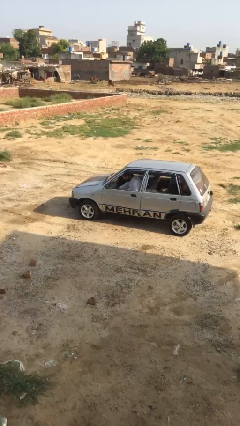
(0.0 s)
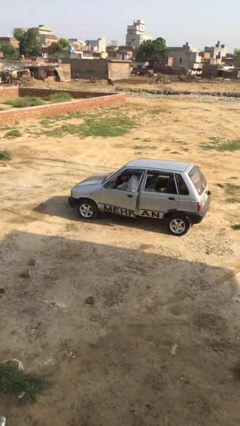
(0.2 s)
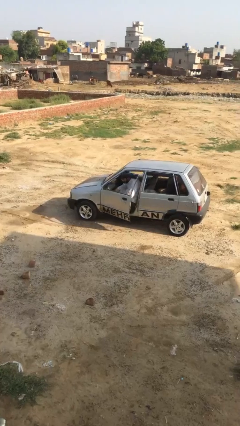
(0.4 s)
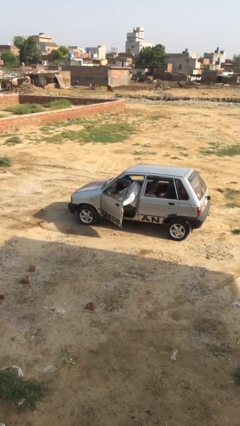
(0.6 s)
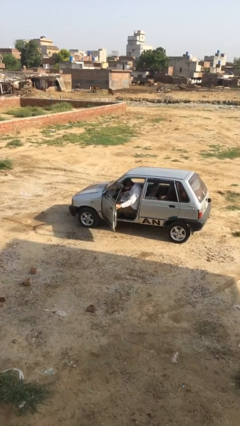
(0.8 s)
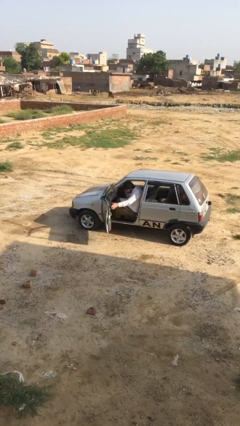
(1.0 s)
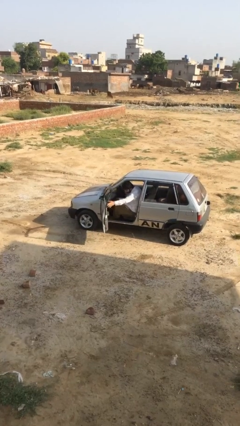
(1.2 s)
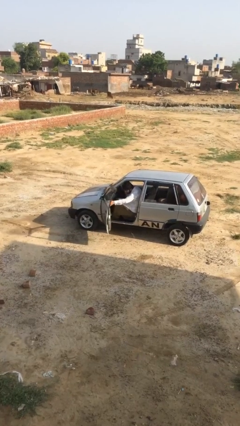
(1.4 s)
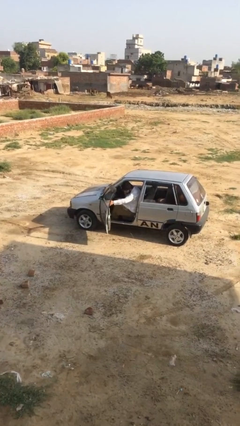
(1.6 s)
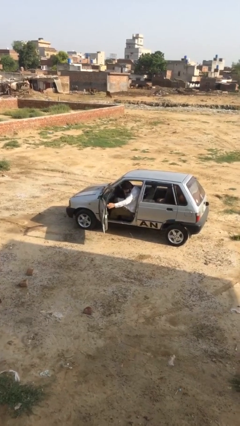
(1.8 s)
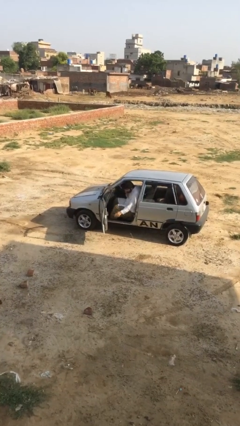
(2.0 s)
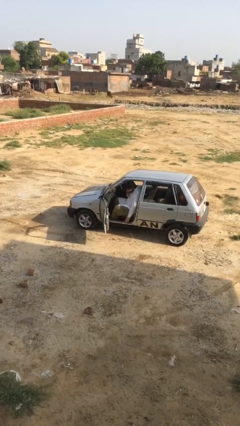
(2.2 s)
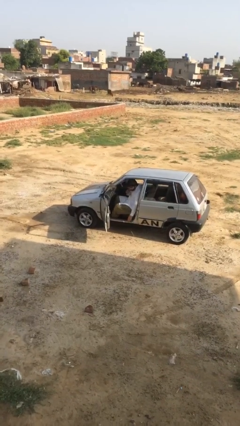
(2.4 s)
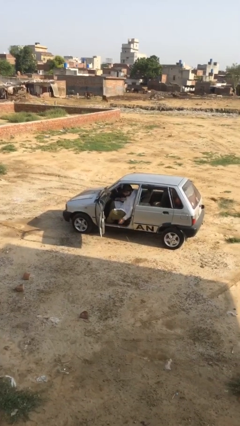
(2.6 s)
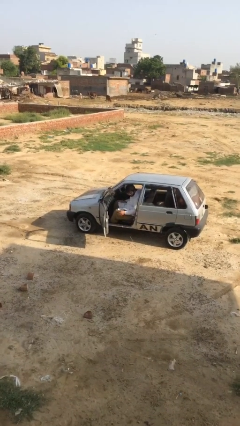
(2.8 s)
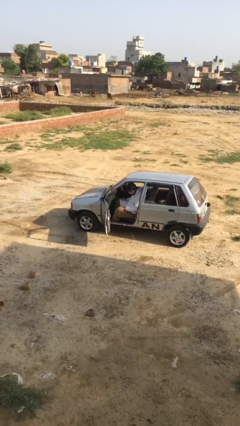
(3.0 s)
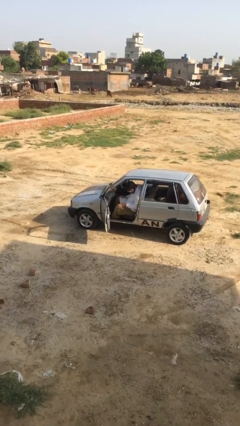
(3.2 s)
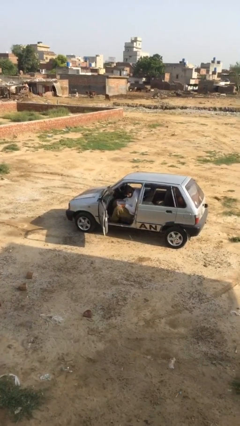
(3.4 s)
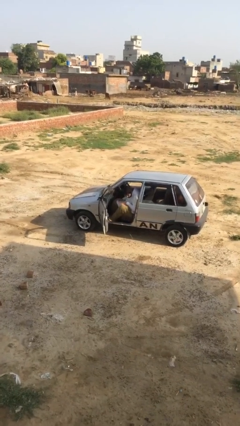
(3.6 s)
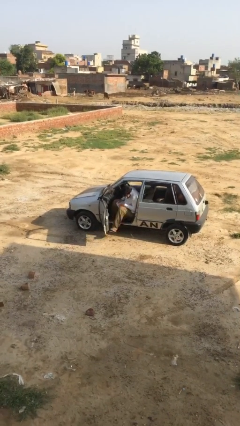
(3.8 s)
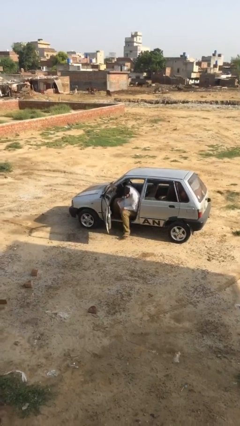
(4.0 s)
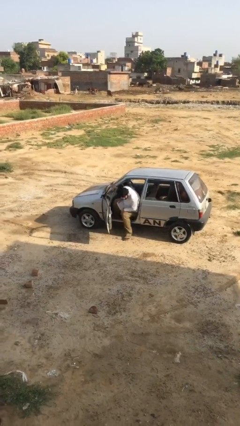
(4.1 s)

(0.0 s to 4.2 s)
person opens car door

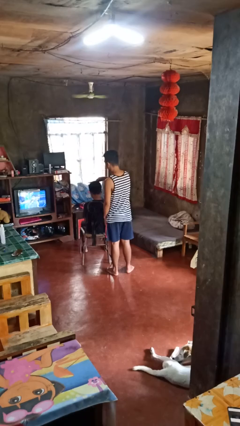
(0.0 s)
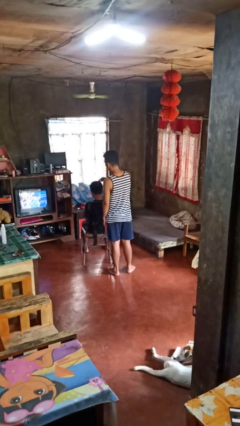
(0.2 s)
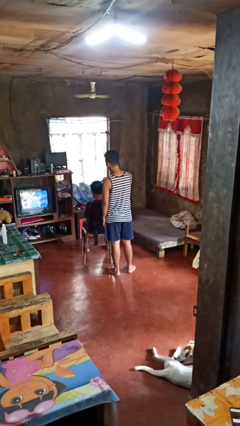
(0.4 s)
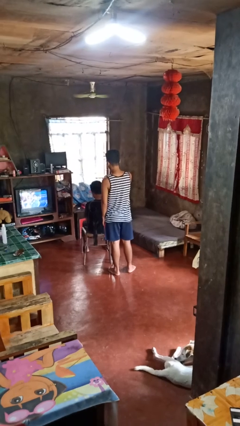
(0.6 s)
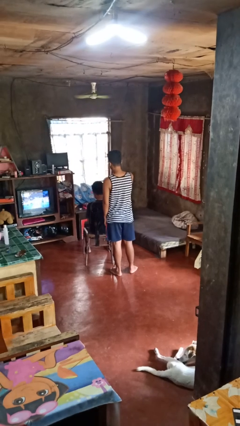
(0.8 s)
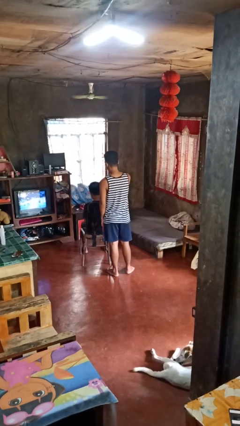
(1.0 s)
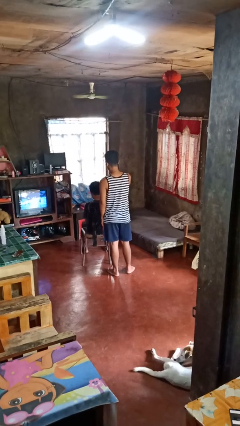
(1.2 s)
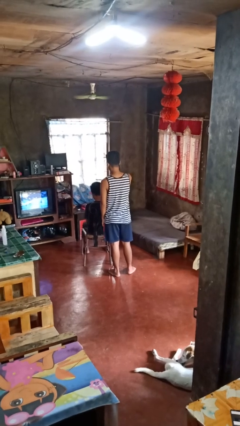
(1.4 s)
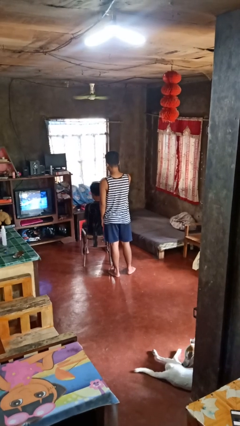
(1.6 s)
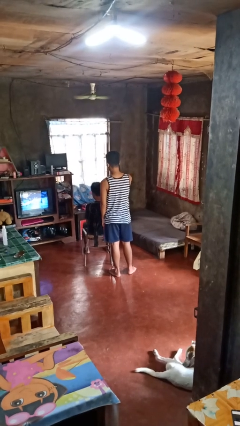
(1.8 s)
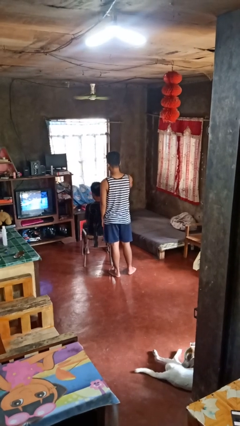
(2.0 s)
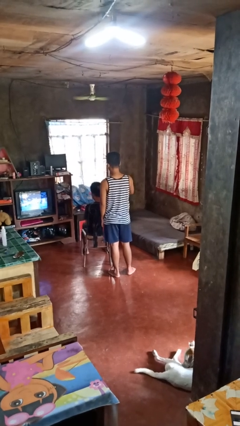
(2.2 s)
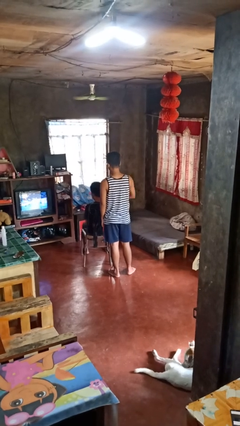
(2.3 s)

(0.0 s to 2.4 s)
person brushes hair of person

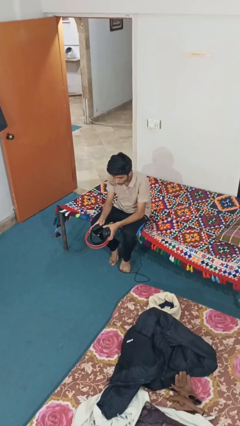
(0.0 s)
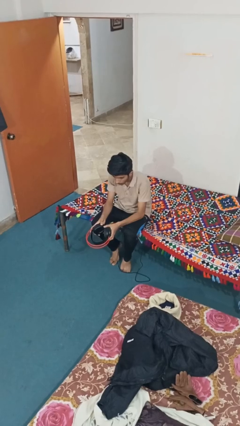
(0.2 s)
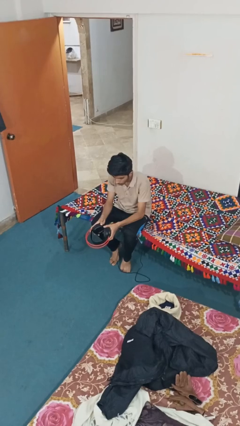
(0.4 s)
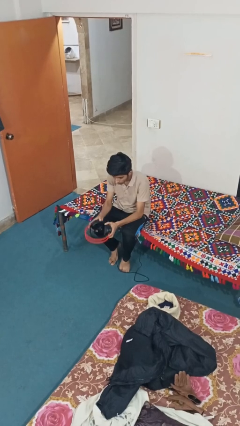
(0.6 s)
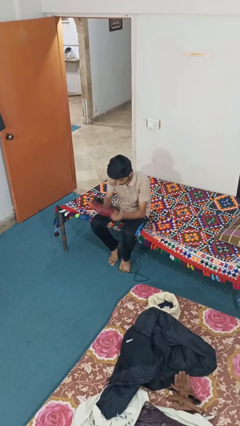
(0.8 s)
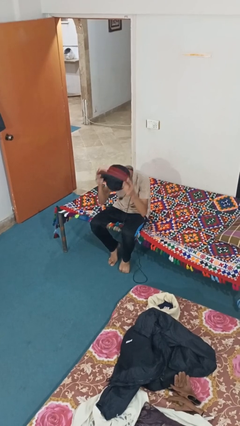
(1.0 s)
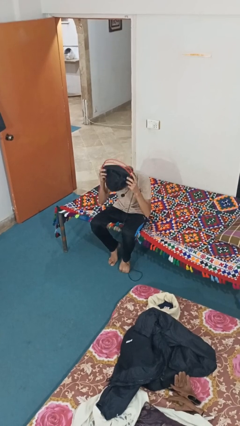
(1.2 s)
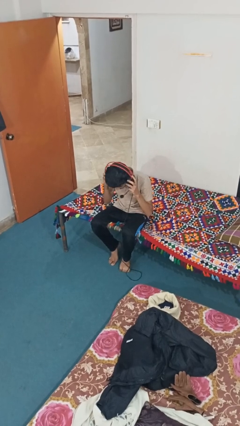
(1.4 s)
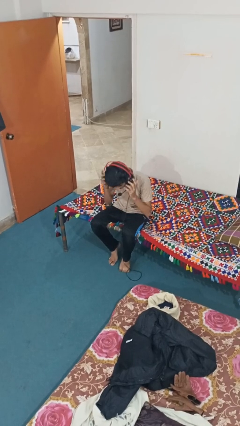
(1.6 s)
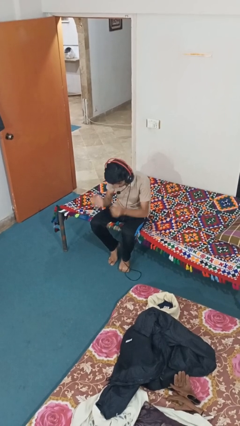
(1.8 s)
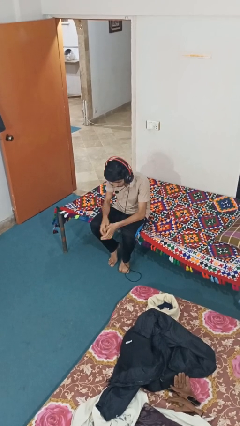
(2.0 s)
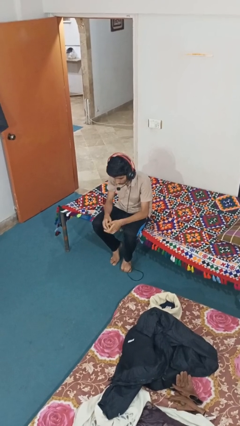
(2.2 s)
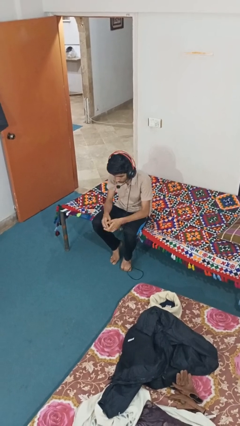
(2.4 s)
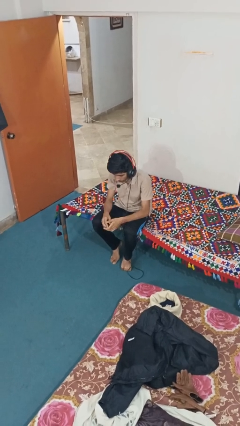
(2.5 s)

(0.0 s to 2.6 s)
person puts on headphones

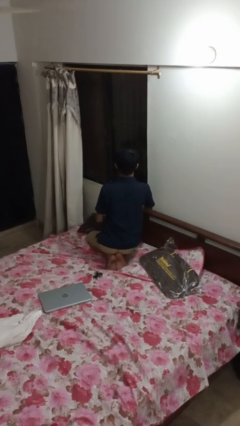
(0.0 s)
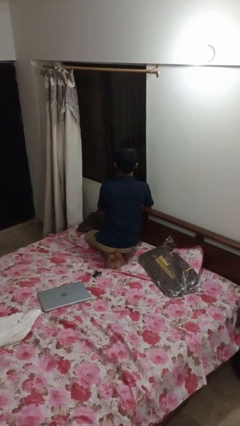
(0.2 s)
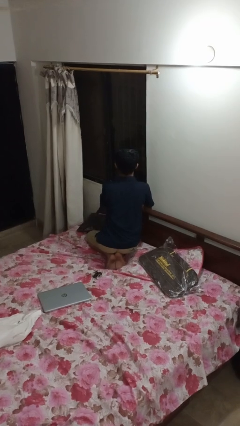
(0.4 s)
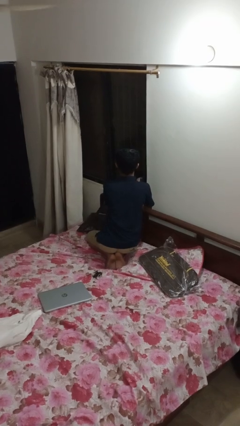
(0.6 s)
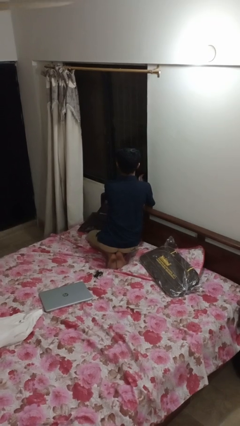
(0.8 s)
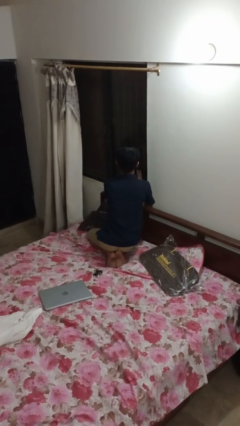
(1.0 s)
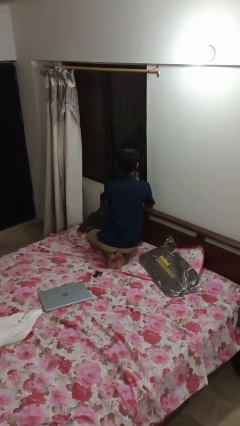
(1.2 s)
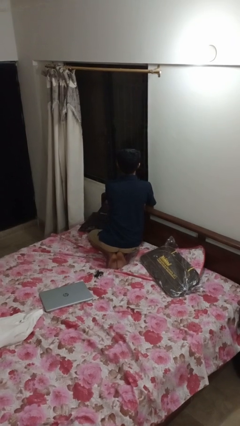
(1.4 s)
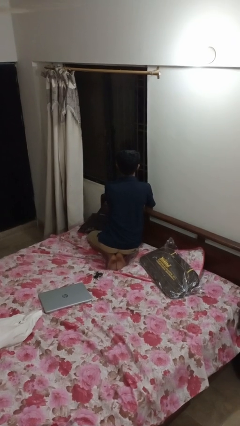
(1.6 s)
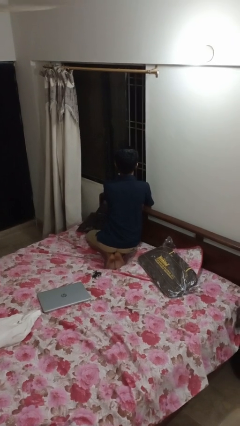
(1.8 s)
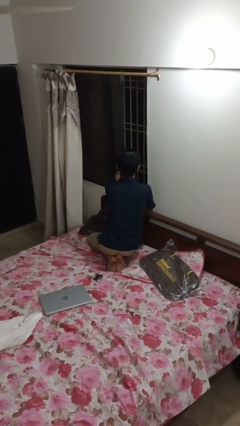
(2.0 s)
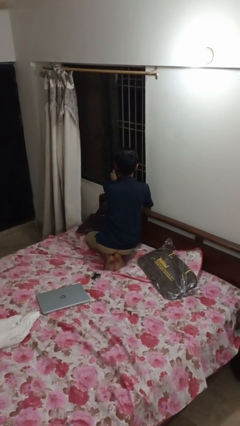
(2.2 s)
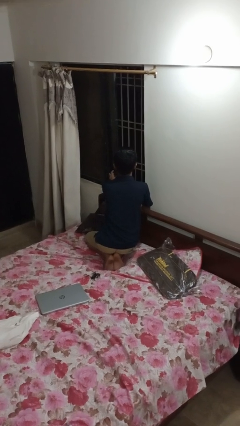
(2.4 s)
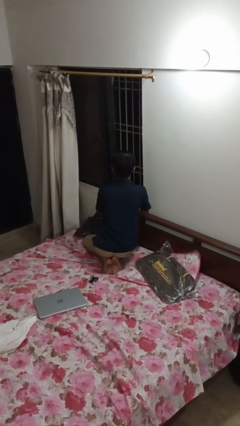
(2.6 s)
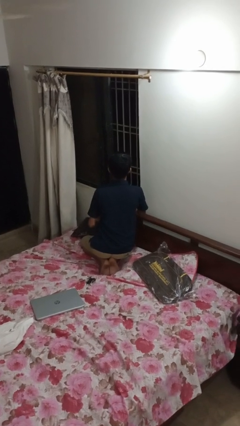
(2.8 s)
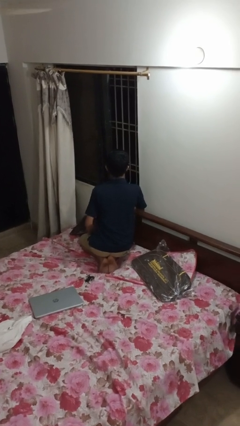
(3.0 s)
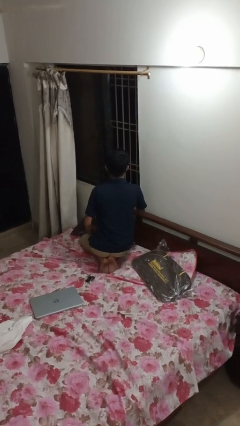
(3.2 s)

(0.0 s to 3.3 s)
person opens home window

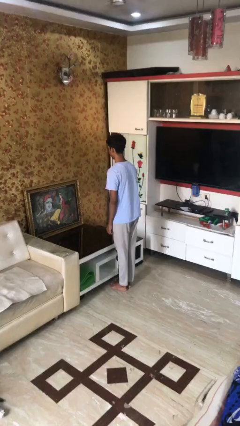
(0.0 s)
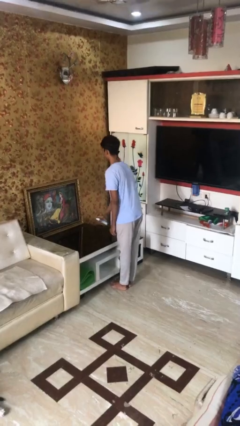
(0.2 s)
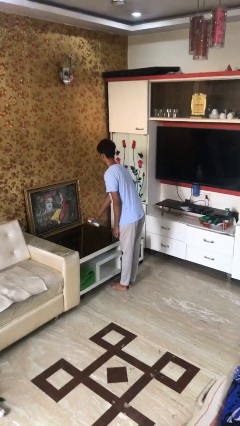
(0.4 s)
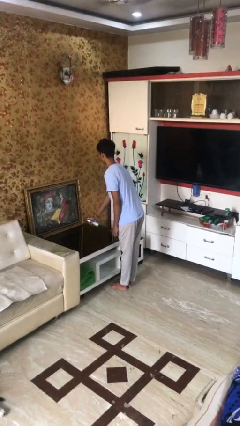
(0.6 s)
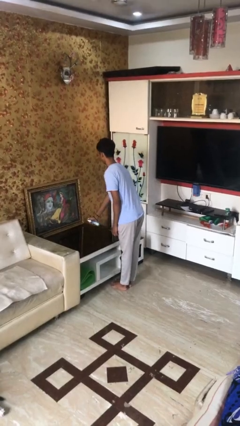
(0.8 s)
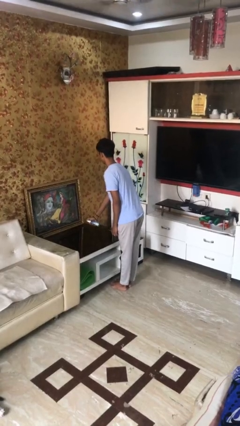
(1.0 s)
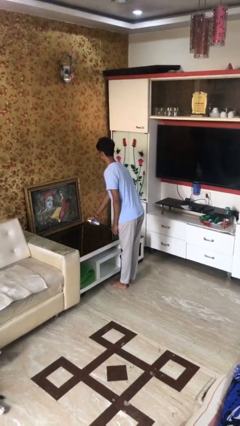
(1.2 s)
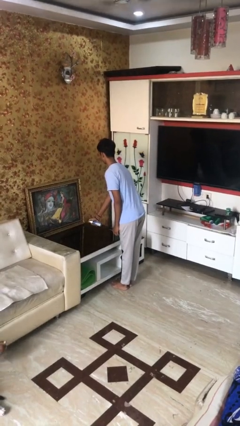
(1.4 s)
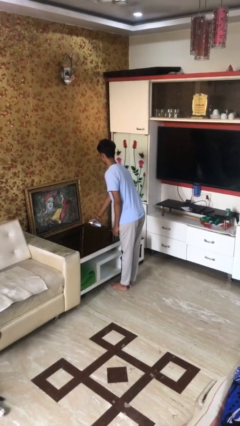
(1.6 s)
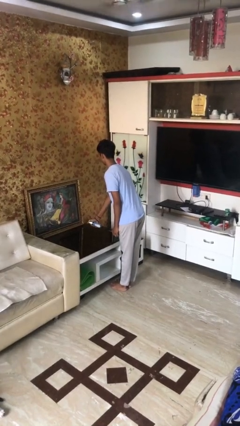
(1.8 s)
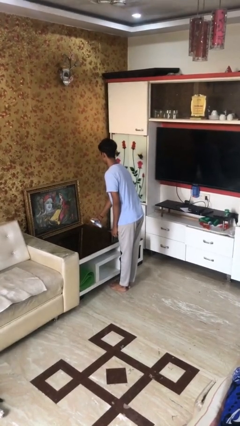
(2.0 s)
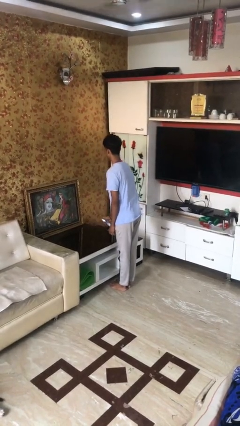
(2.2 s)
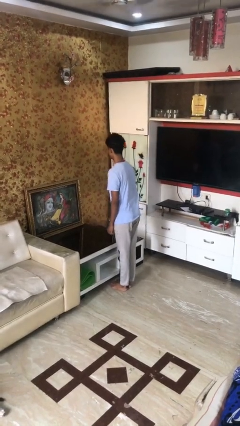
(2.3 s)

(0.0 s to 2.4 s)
person sprays from bottle

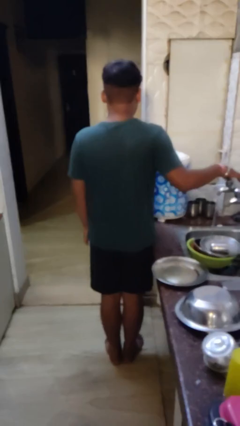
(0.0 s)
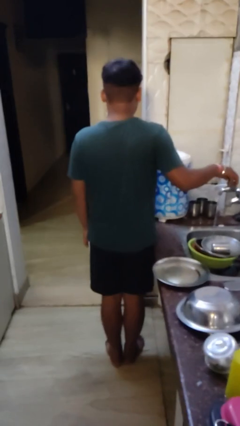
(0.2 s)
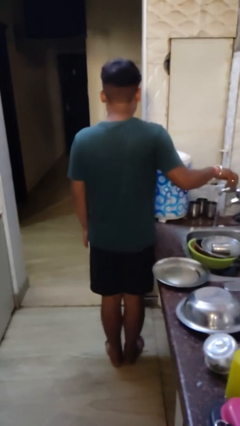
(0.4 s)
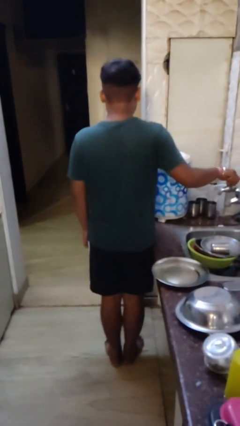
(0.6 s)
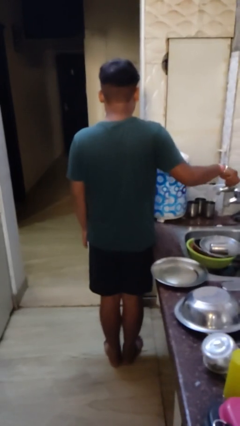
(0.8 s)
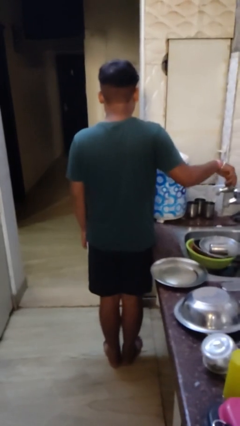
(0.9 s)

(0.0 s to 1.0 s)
person turns off faucet

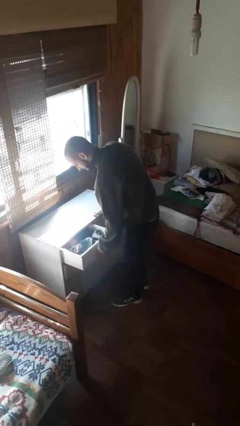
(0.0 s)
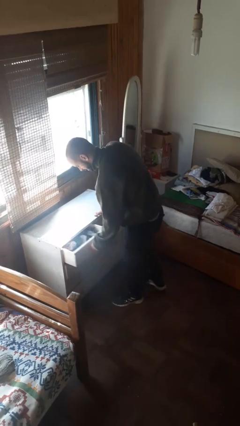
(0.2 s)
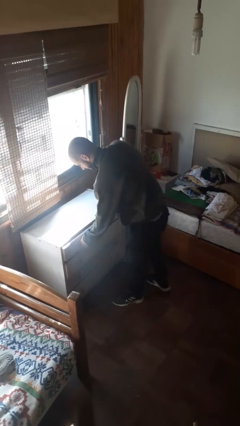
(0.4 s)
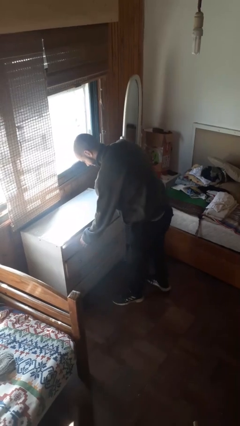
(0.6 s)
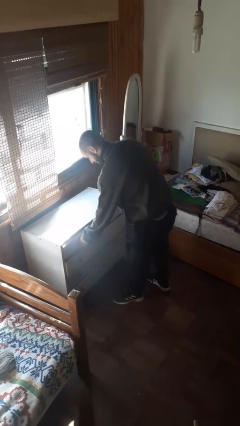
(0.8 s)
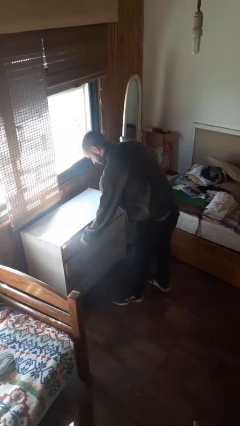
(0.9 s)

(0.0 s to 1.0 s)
person closes dresser drawer
